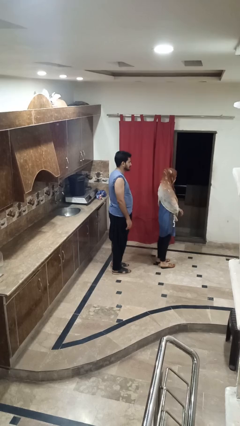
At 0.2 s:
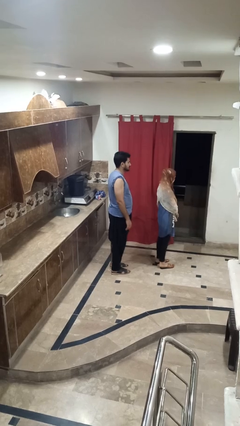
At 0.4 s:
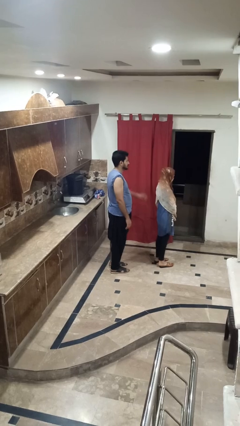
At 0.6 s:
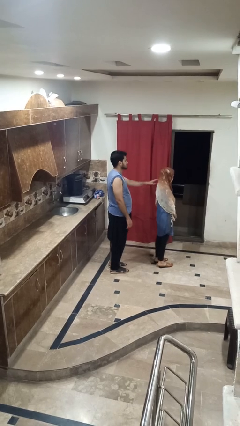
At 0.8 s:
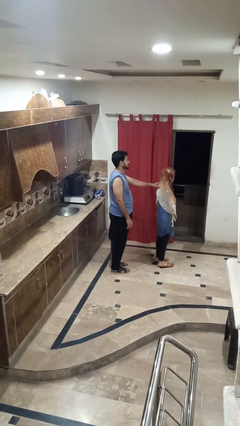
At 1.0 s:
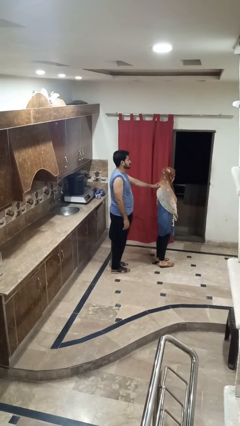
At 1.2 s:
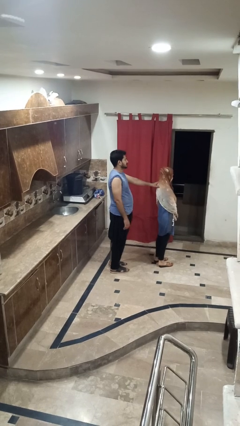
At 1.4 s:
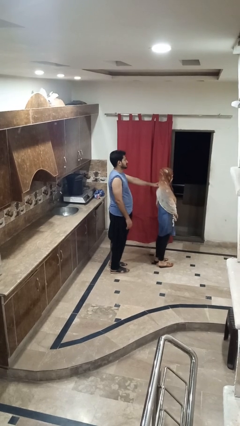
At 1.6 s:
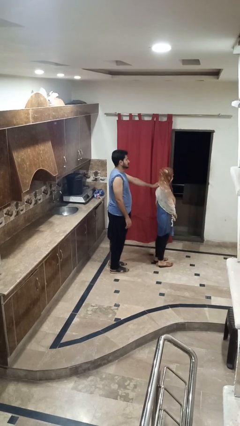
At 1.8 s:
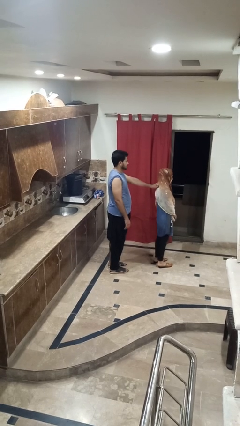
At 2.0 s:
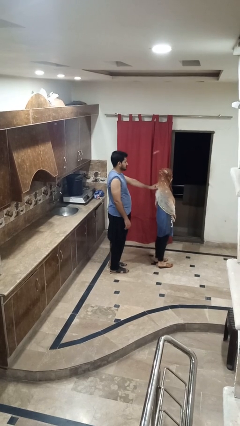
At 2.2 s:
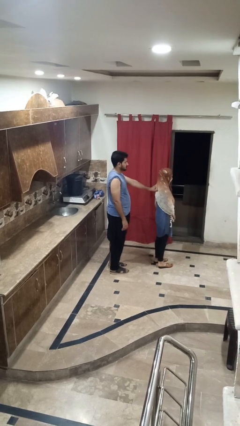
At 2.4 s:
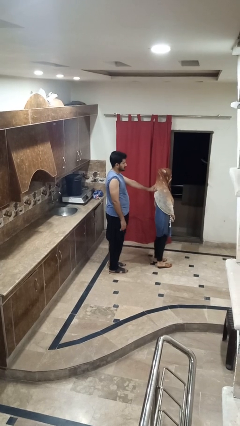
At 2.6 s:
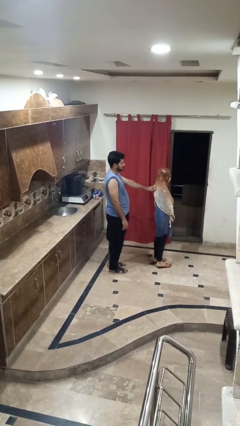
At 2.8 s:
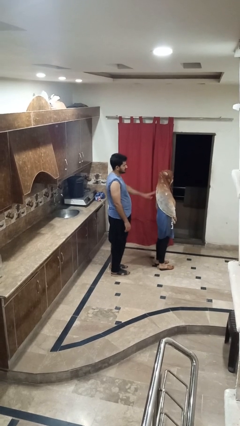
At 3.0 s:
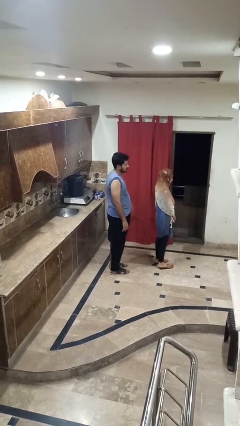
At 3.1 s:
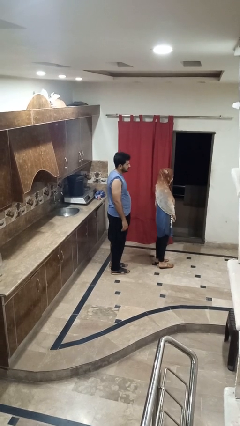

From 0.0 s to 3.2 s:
person touches back of person

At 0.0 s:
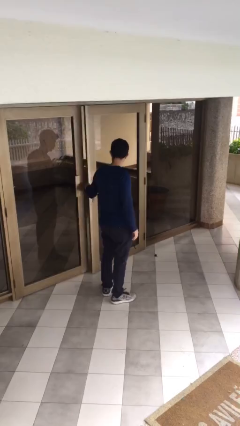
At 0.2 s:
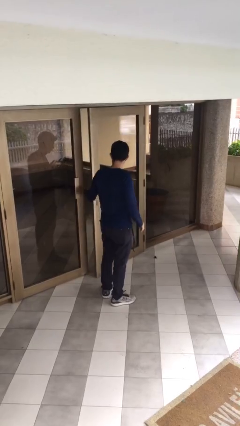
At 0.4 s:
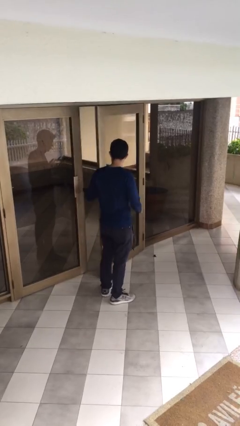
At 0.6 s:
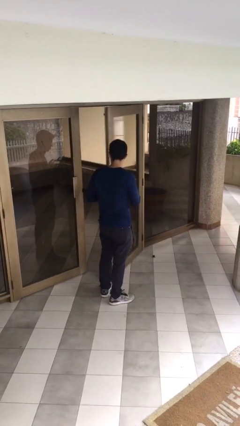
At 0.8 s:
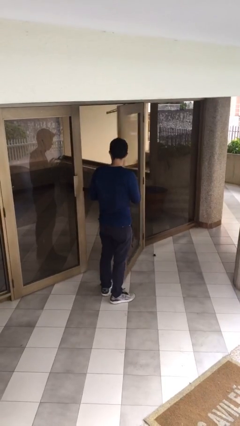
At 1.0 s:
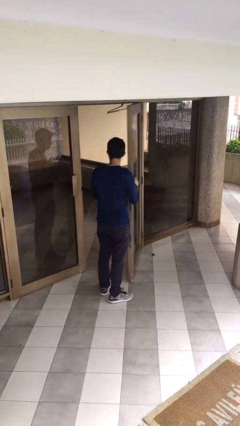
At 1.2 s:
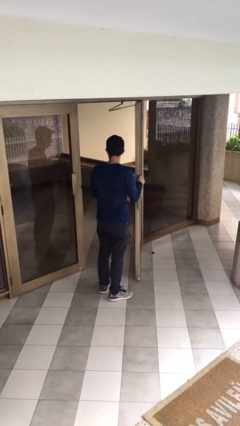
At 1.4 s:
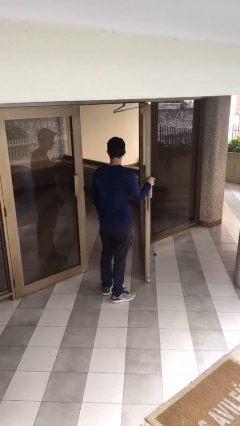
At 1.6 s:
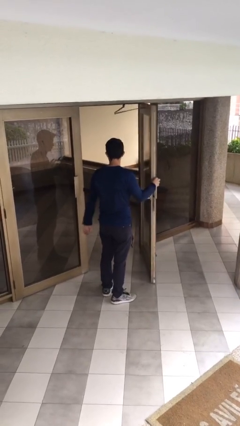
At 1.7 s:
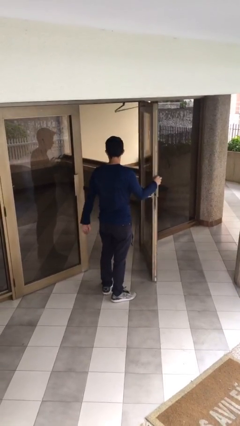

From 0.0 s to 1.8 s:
person opens facility door

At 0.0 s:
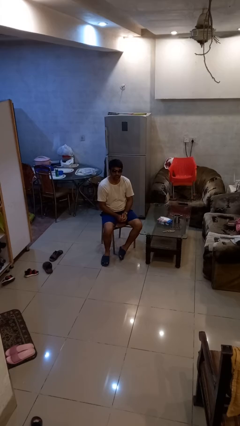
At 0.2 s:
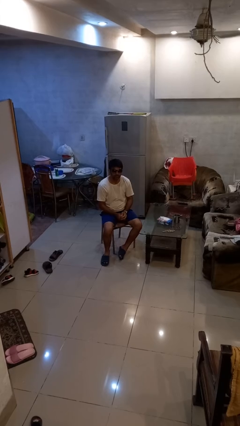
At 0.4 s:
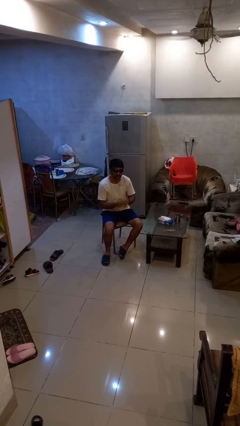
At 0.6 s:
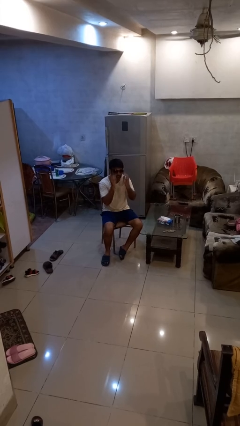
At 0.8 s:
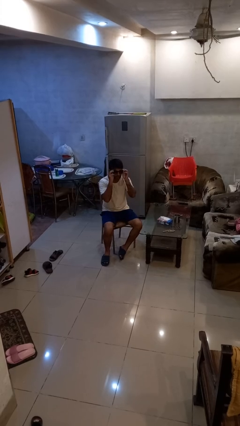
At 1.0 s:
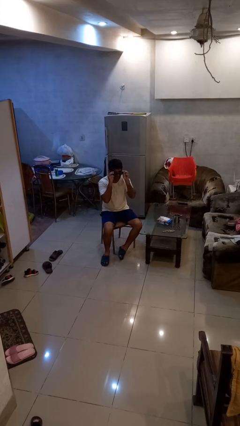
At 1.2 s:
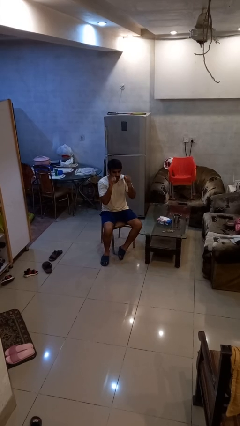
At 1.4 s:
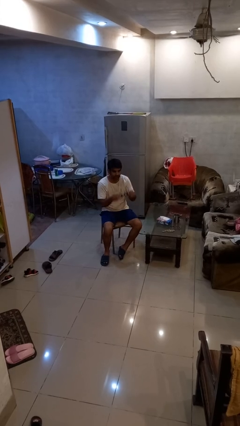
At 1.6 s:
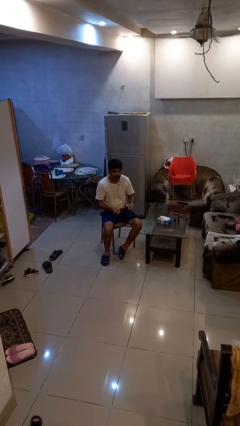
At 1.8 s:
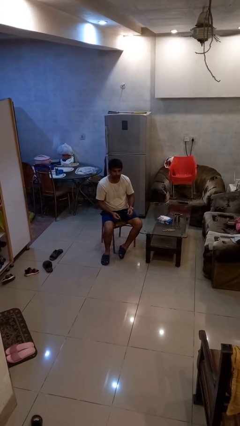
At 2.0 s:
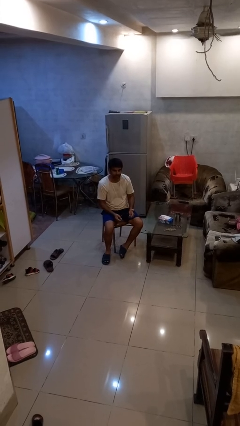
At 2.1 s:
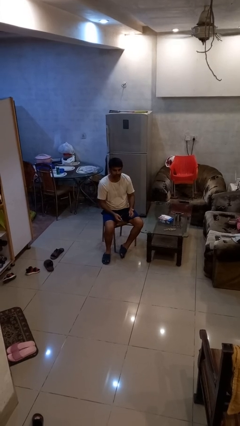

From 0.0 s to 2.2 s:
person takes off sunglasses

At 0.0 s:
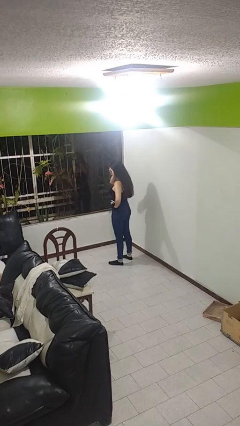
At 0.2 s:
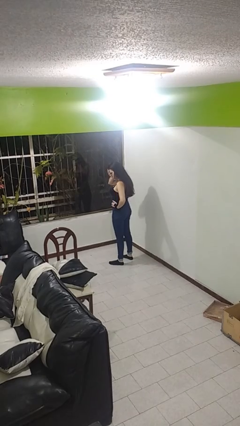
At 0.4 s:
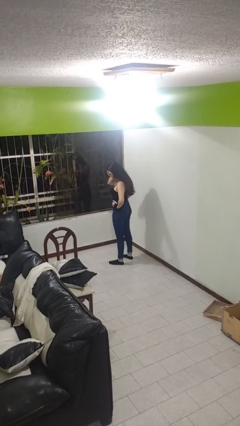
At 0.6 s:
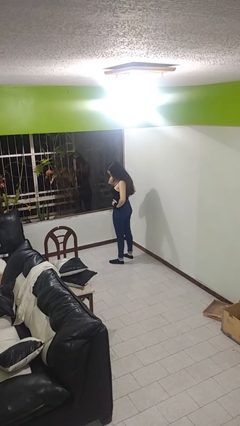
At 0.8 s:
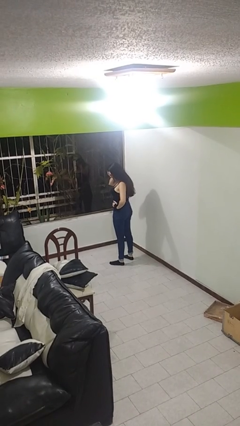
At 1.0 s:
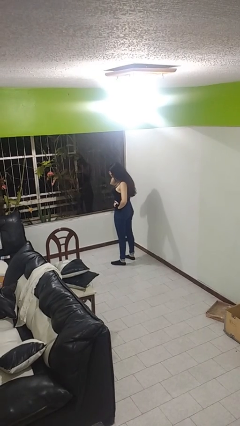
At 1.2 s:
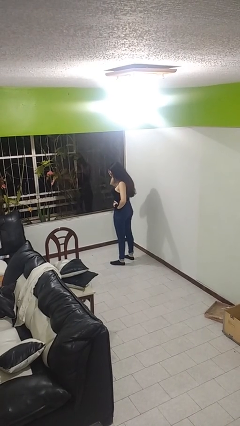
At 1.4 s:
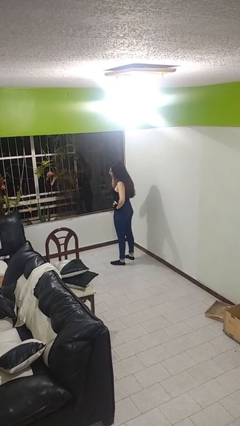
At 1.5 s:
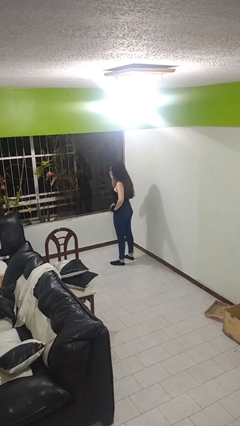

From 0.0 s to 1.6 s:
person covers face with hands

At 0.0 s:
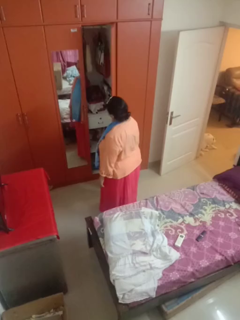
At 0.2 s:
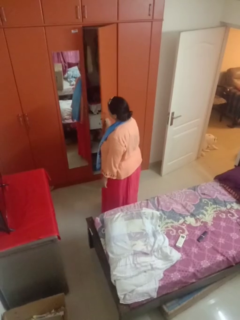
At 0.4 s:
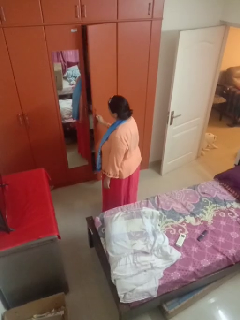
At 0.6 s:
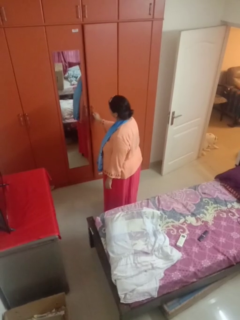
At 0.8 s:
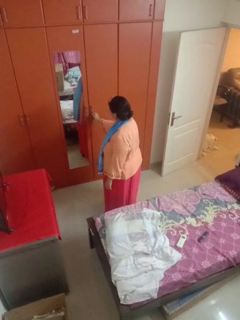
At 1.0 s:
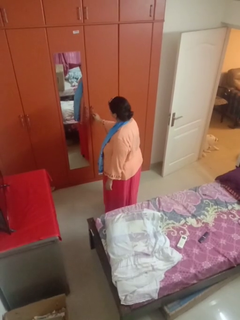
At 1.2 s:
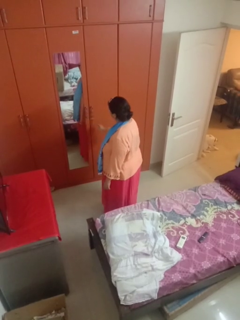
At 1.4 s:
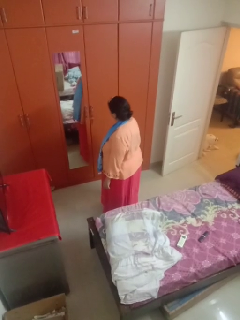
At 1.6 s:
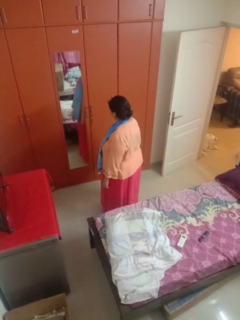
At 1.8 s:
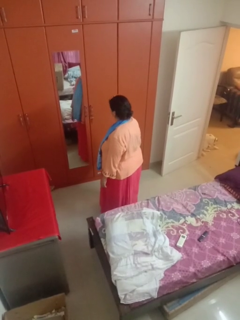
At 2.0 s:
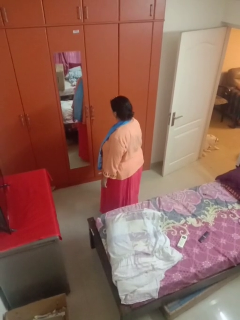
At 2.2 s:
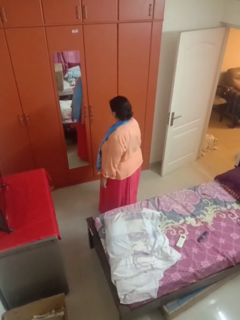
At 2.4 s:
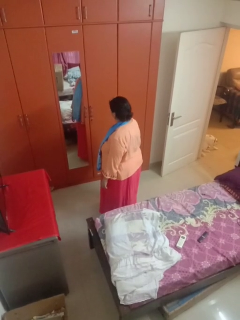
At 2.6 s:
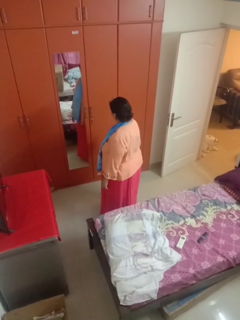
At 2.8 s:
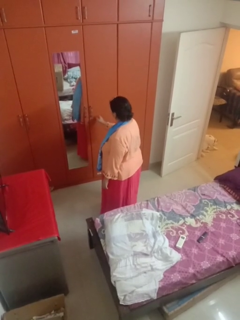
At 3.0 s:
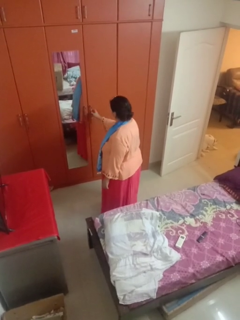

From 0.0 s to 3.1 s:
person closes closet door

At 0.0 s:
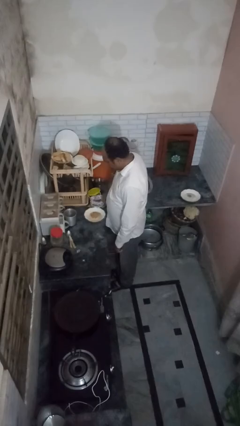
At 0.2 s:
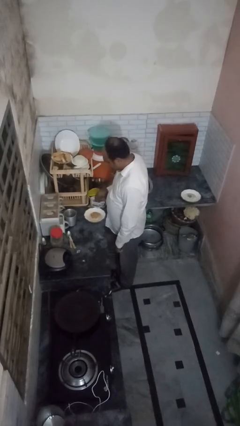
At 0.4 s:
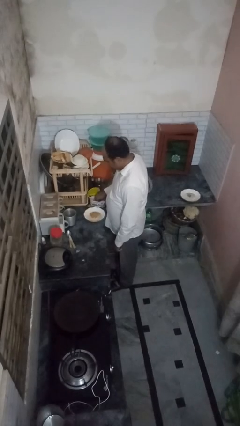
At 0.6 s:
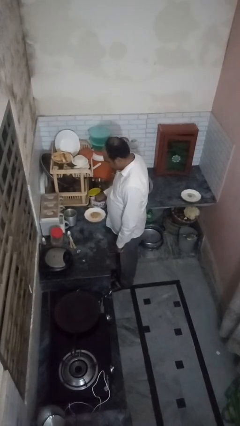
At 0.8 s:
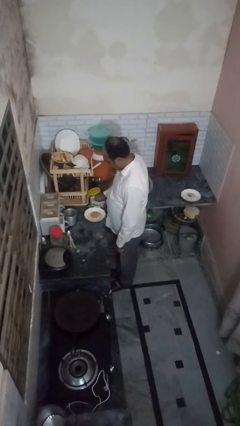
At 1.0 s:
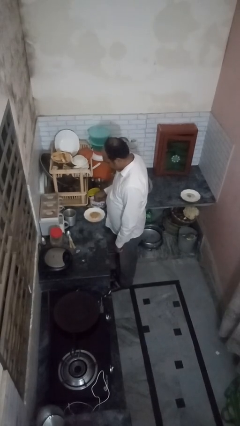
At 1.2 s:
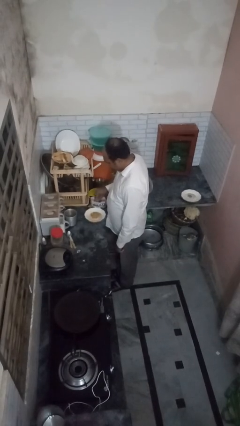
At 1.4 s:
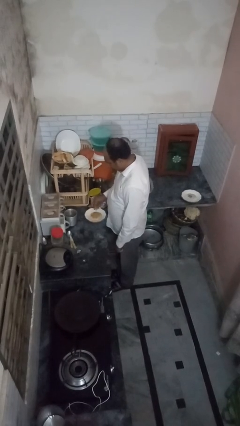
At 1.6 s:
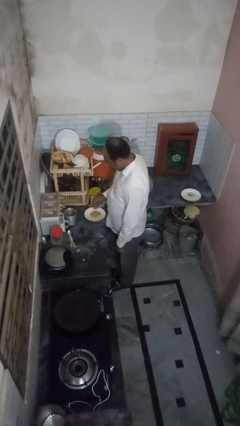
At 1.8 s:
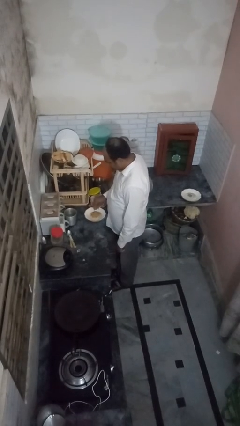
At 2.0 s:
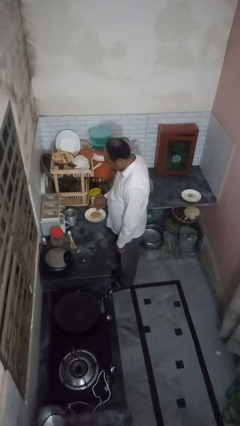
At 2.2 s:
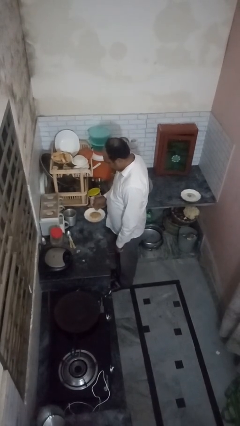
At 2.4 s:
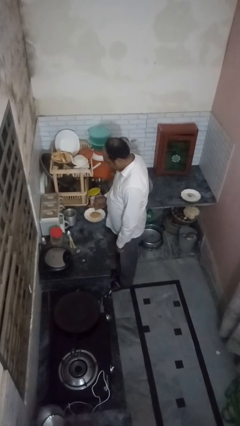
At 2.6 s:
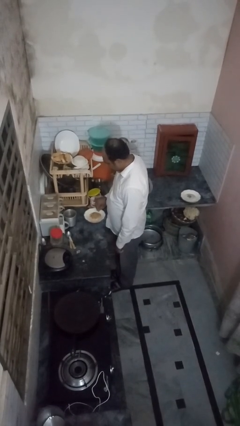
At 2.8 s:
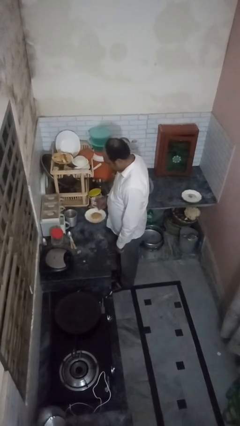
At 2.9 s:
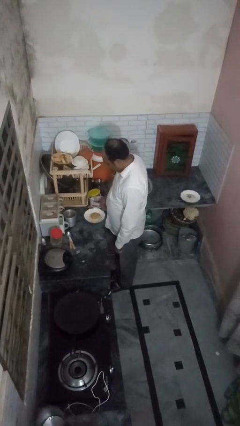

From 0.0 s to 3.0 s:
person pours into bowl

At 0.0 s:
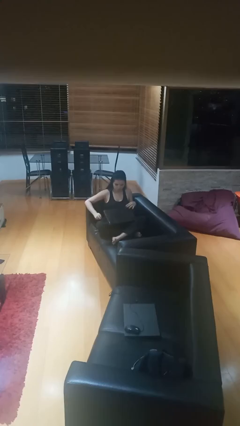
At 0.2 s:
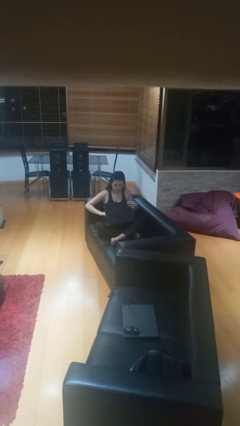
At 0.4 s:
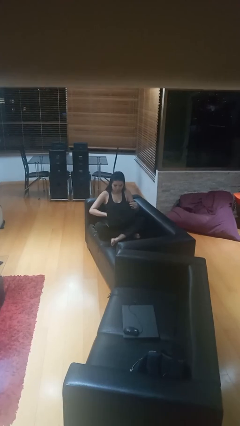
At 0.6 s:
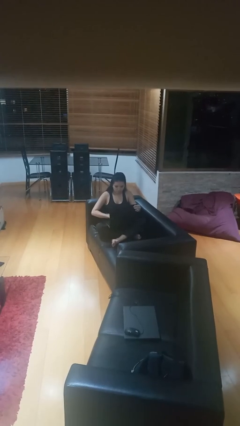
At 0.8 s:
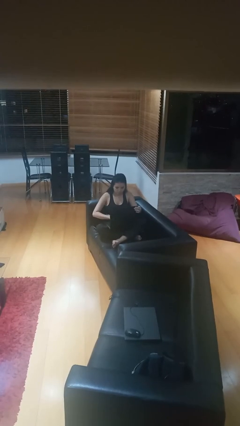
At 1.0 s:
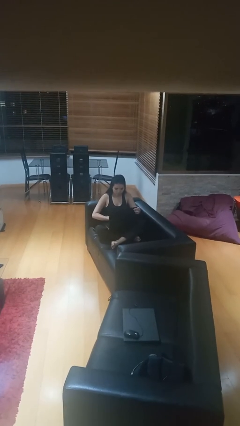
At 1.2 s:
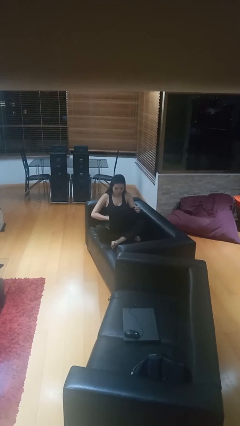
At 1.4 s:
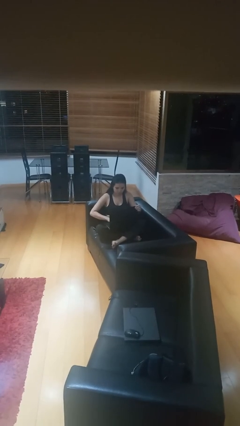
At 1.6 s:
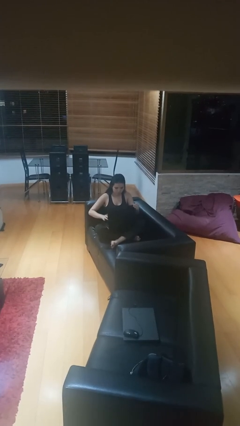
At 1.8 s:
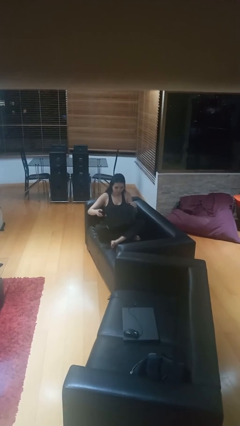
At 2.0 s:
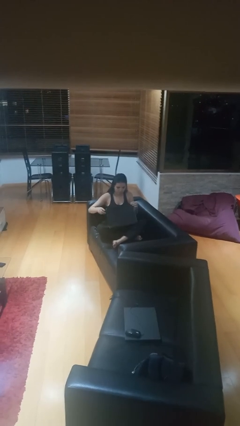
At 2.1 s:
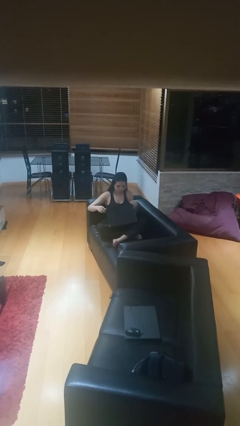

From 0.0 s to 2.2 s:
person interacts with laptop

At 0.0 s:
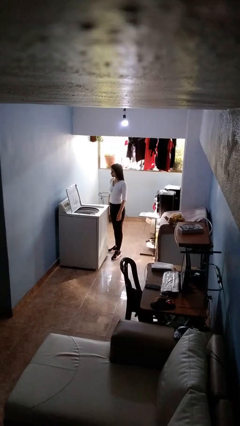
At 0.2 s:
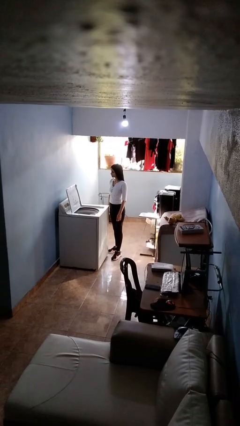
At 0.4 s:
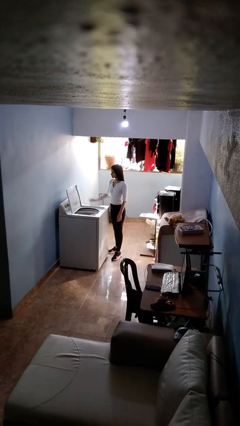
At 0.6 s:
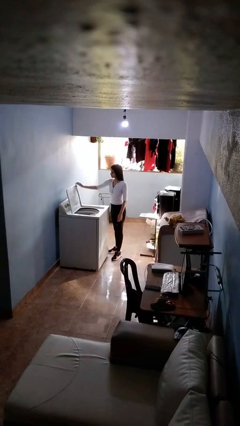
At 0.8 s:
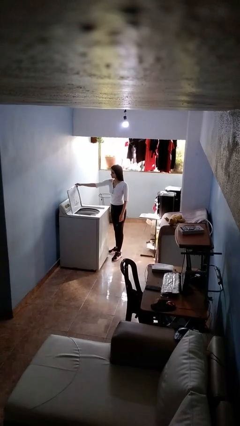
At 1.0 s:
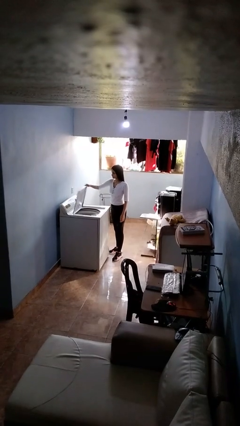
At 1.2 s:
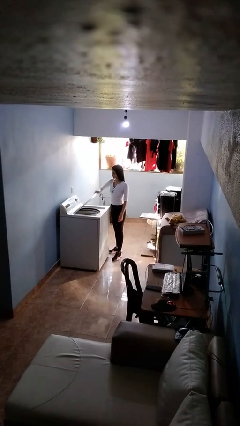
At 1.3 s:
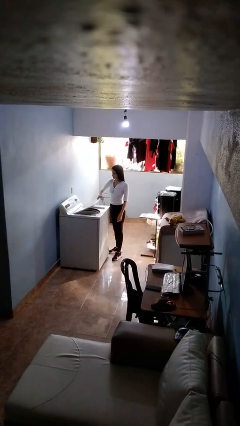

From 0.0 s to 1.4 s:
person closes clothes washer
